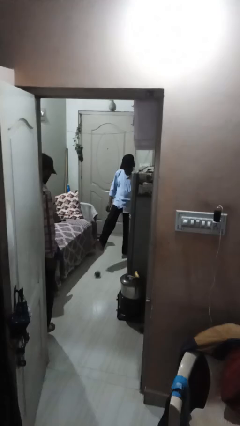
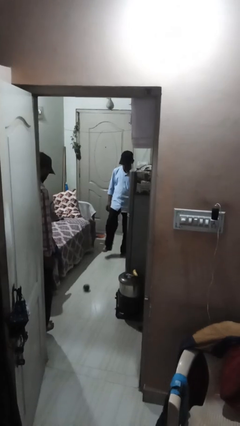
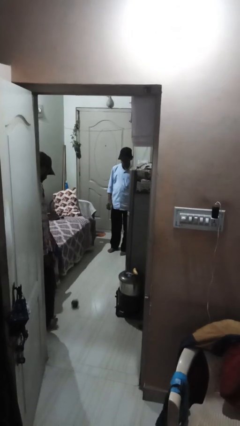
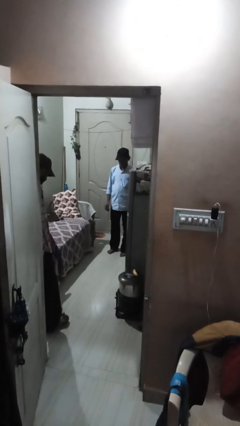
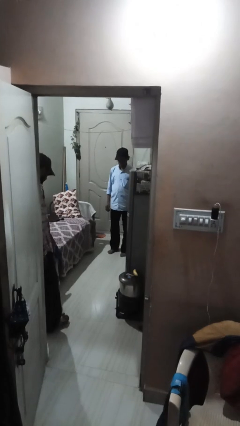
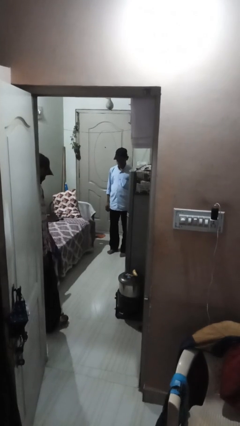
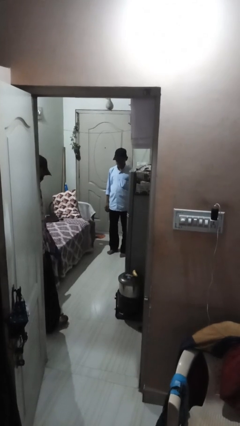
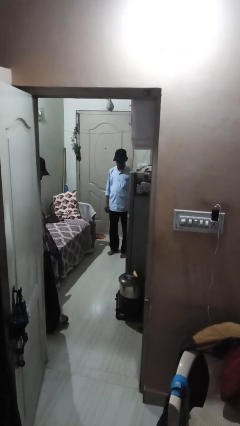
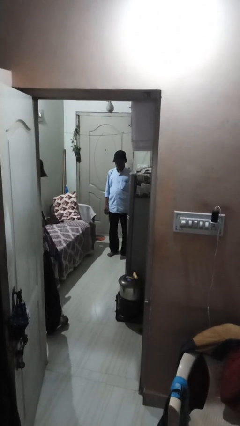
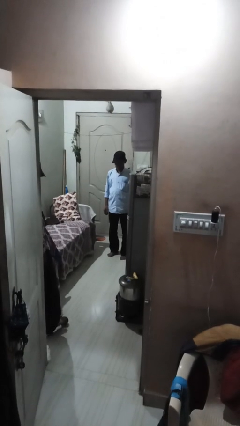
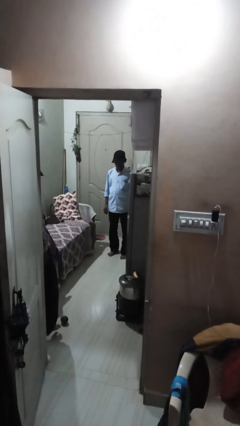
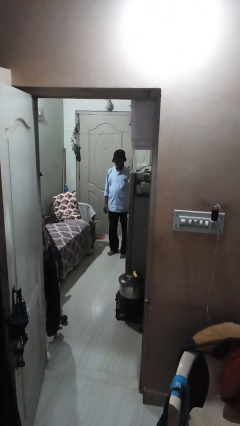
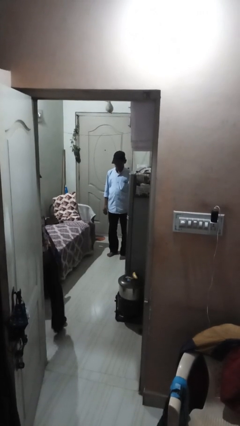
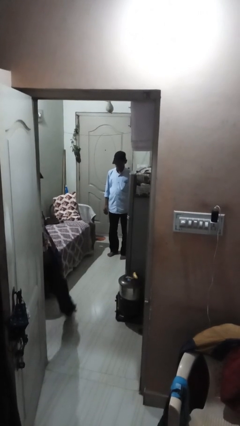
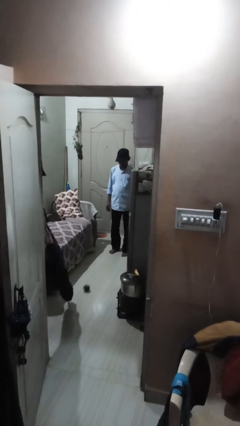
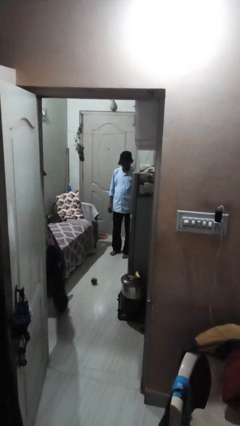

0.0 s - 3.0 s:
person kicks object to person

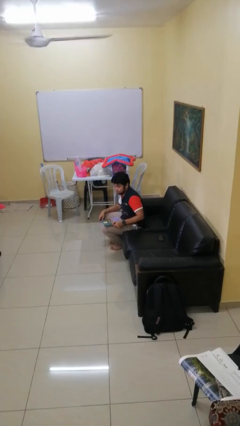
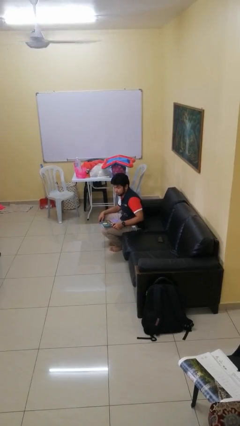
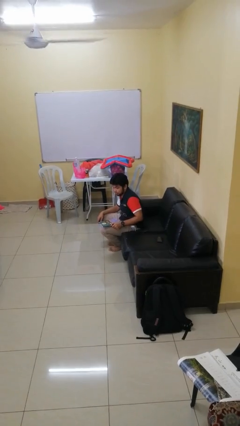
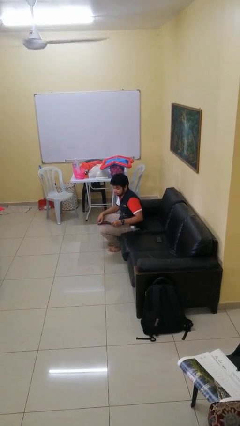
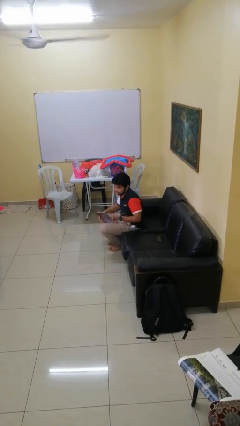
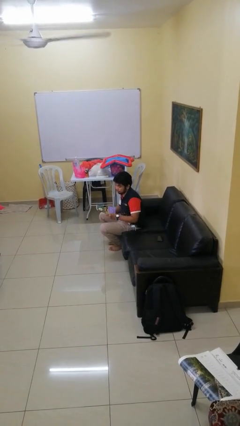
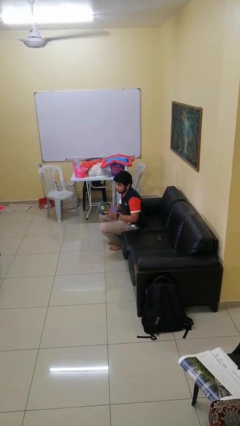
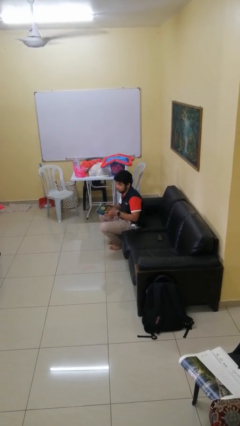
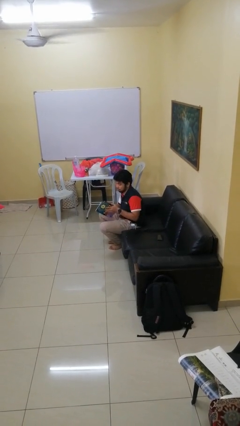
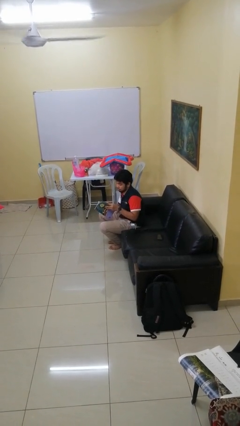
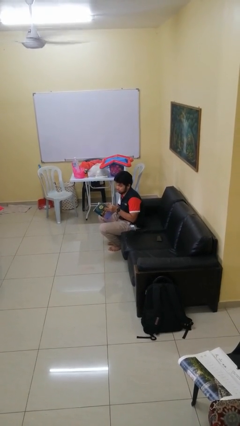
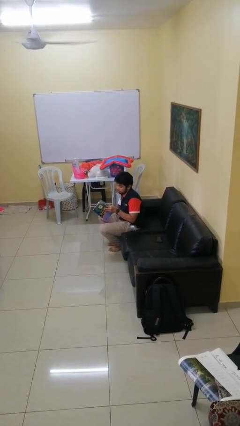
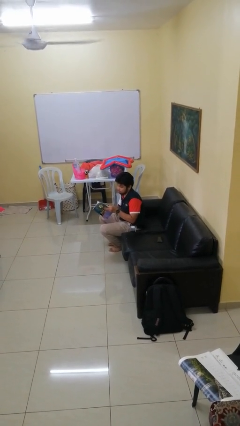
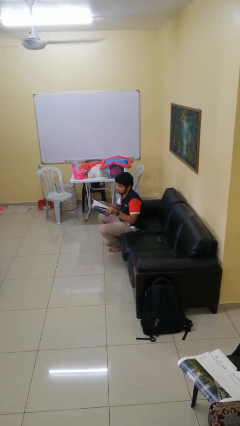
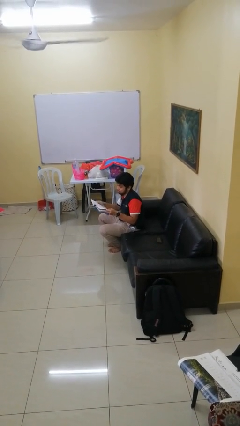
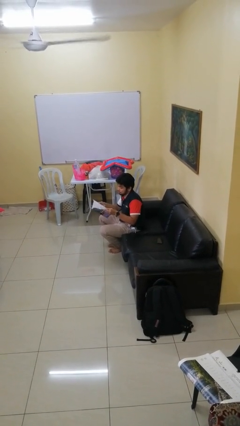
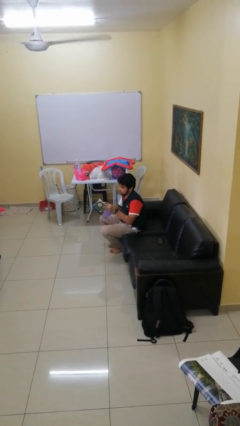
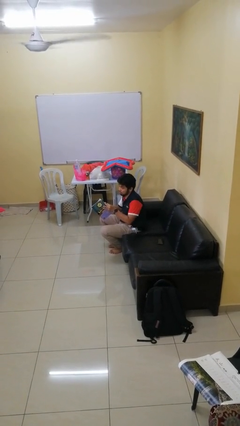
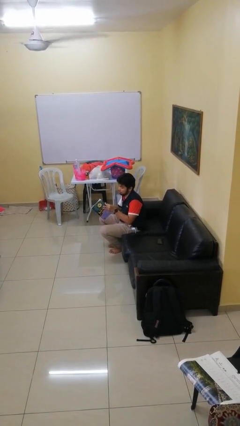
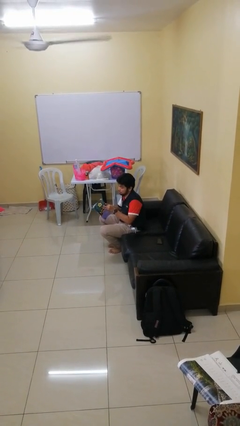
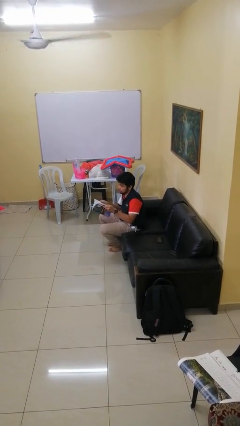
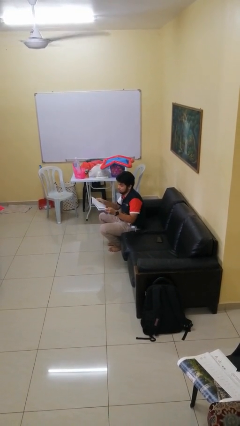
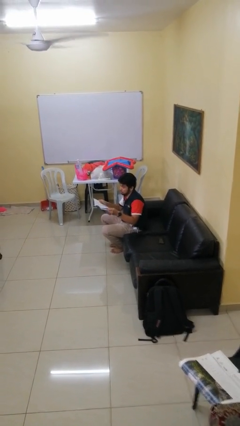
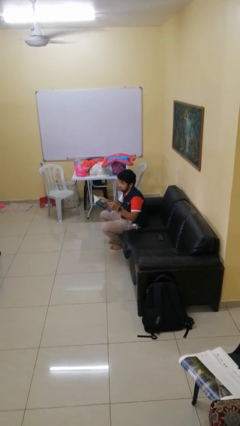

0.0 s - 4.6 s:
person reads magazine

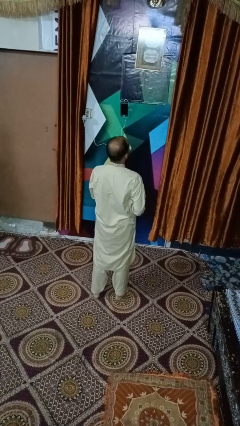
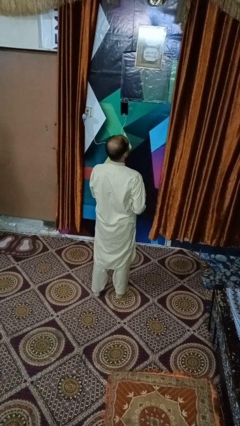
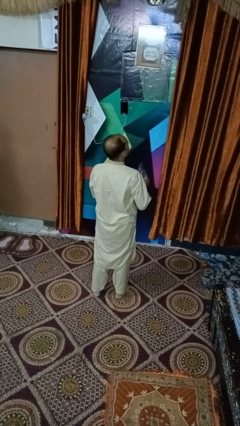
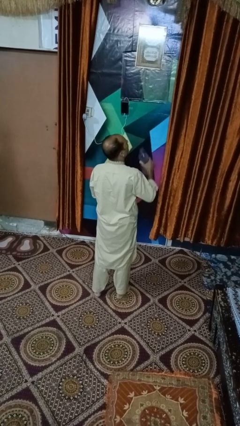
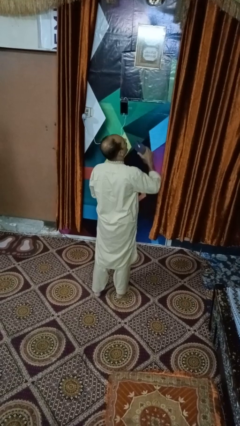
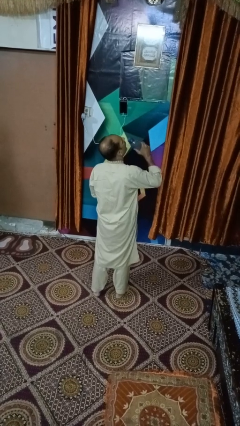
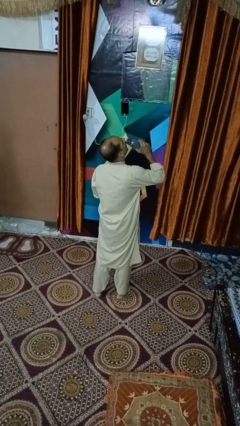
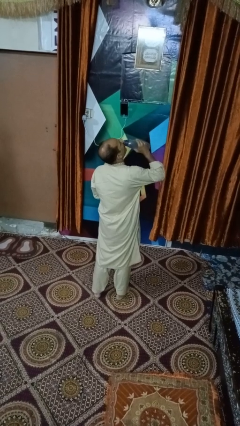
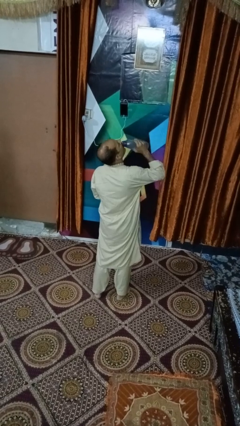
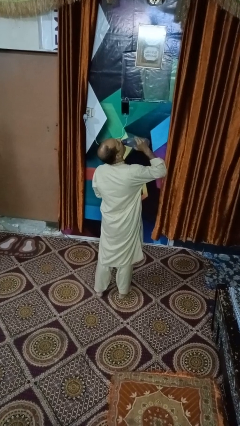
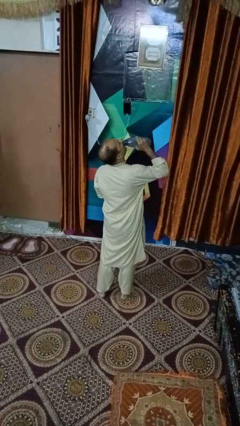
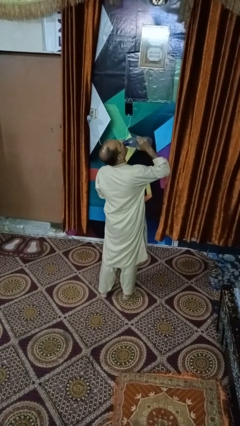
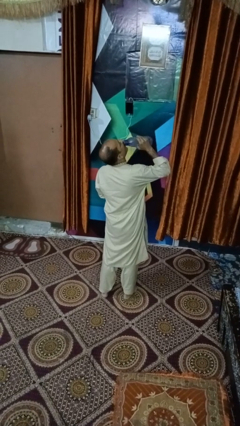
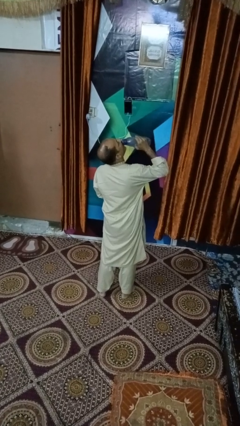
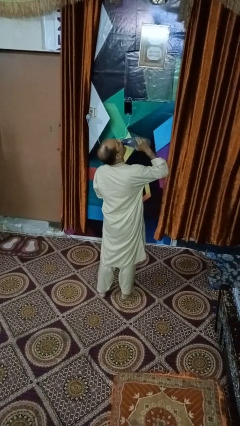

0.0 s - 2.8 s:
person drinks from bottle

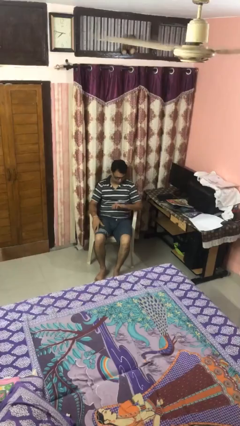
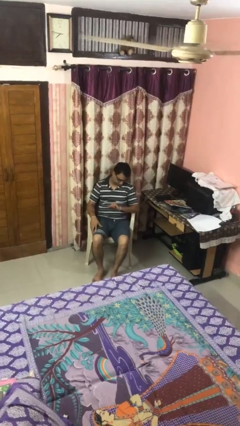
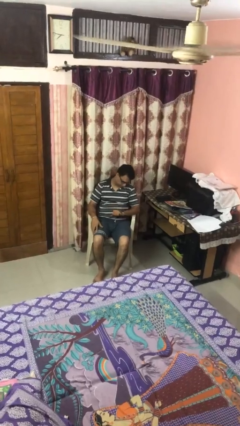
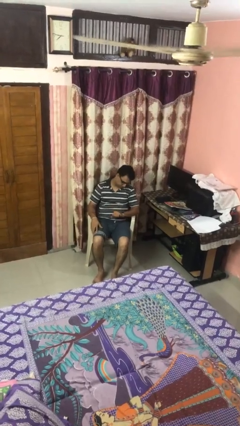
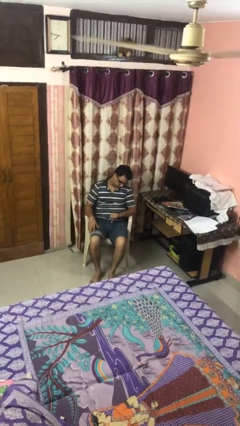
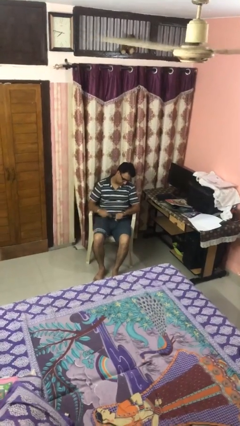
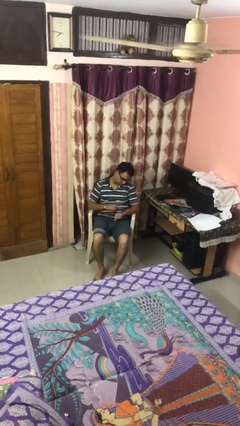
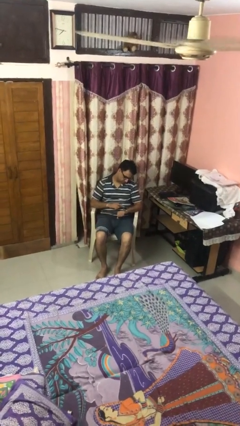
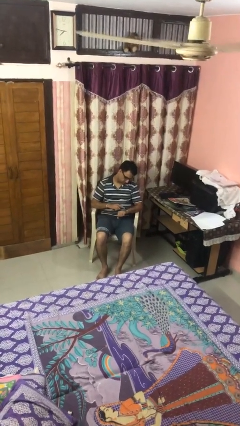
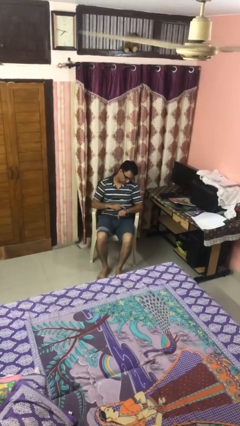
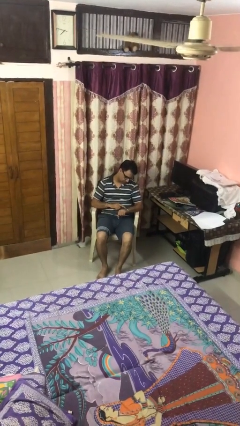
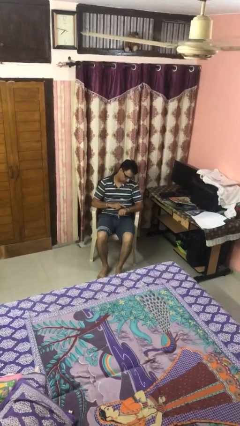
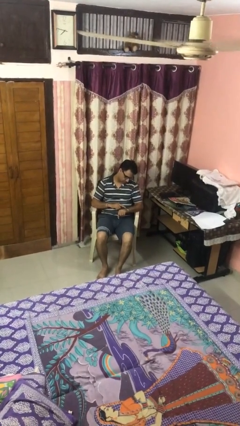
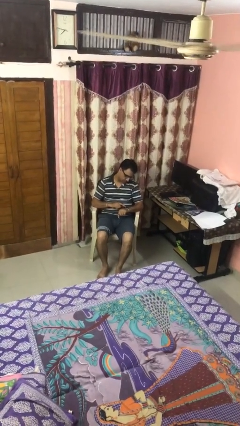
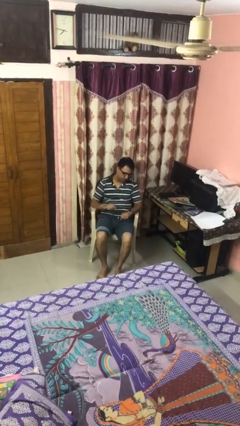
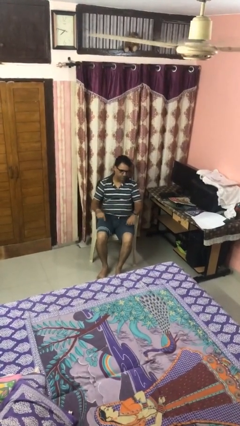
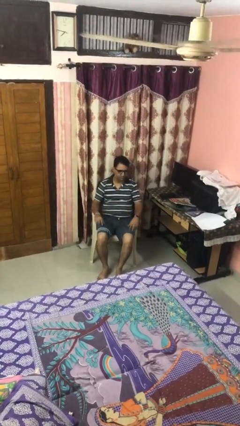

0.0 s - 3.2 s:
person looks at wristwatch

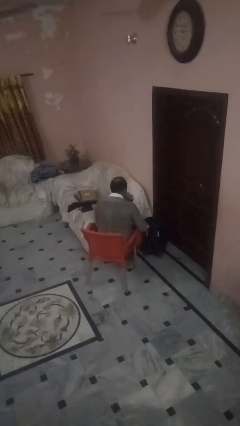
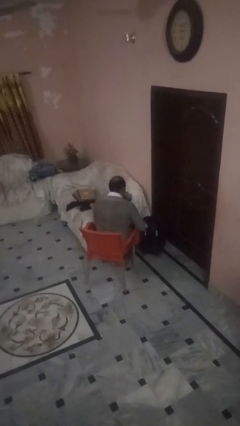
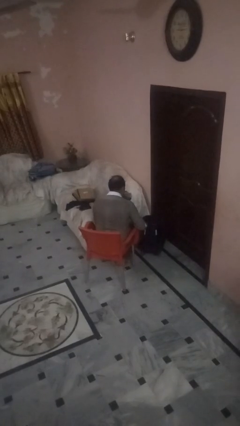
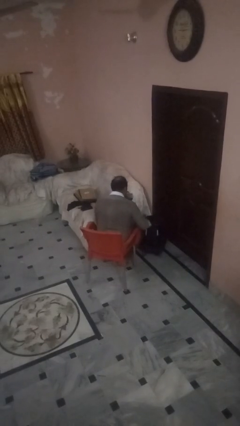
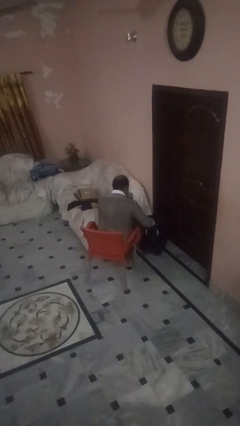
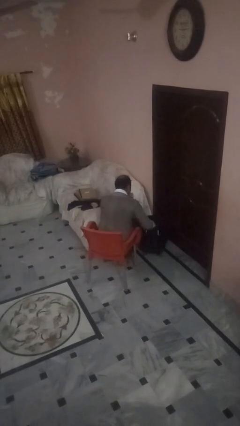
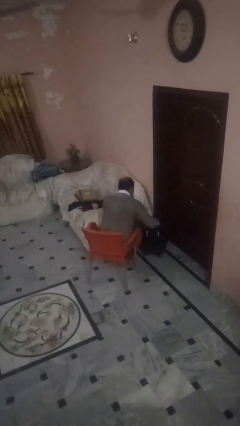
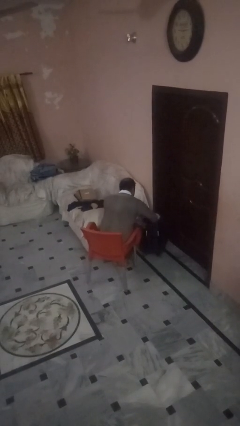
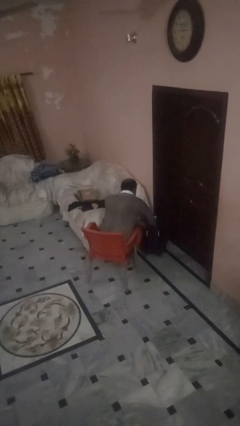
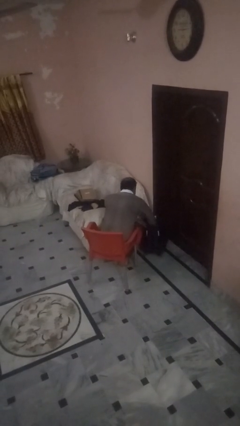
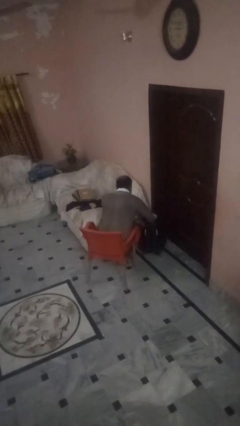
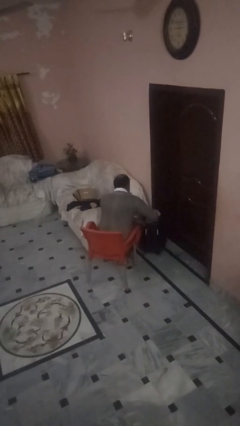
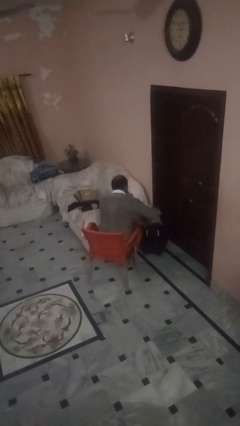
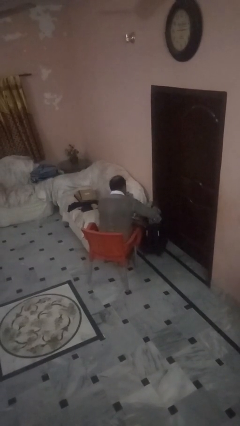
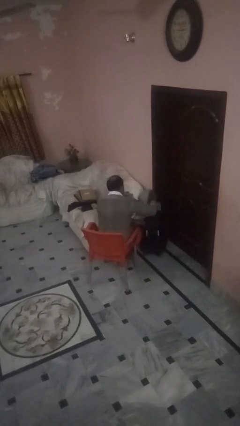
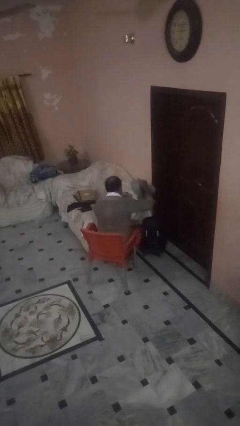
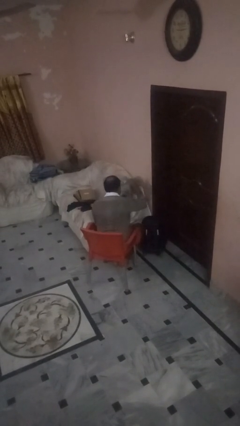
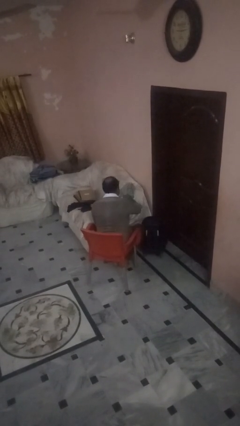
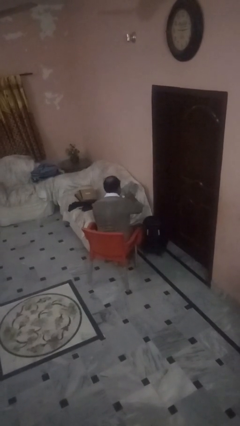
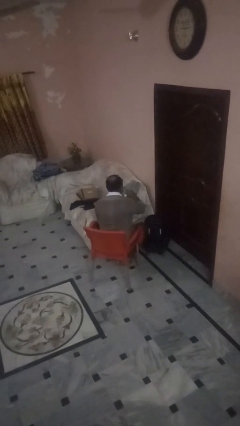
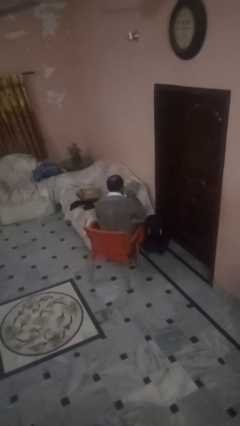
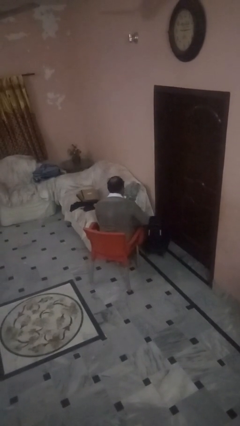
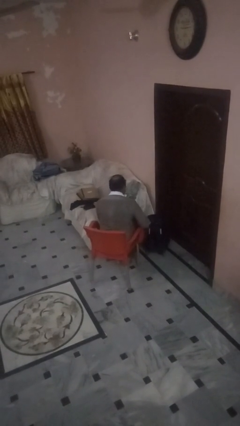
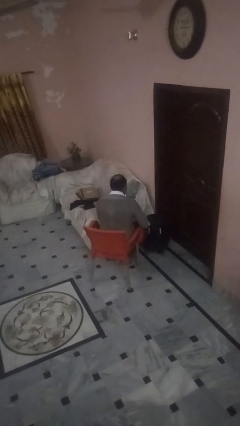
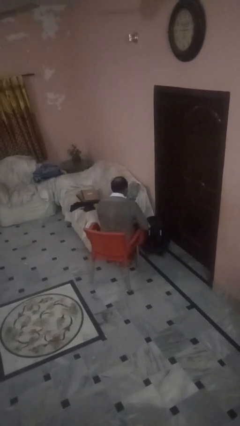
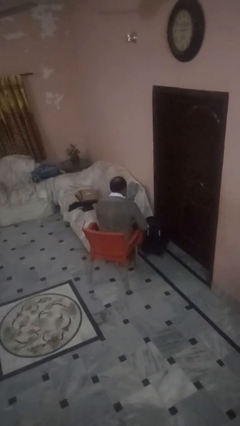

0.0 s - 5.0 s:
person unloads clothes from suitcase
